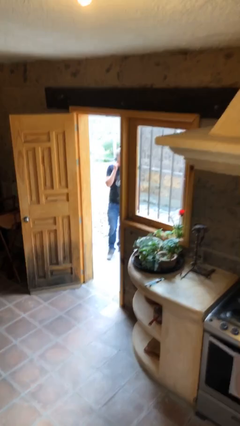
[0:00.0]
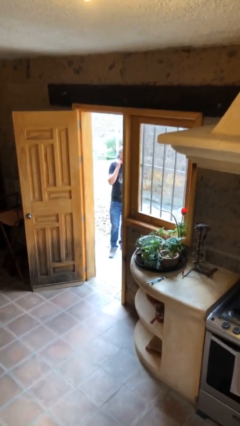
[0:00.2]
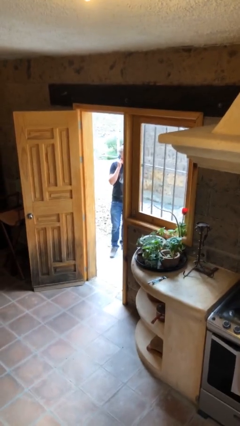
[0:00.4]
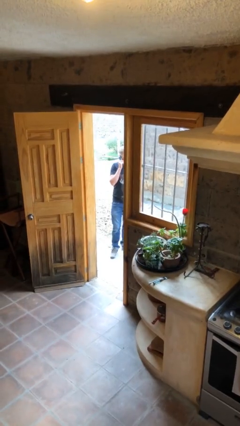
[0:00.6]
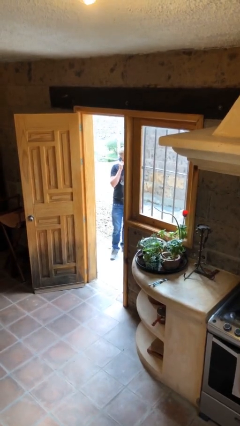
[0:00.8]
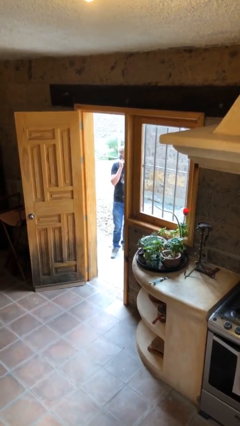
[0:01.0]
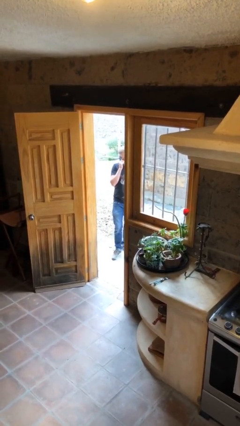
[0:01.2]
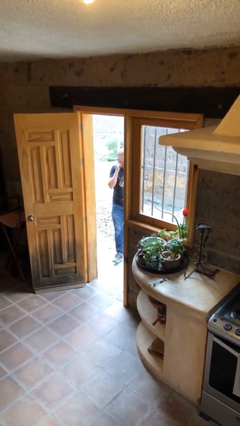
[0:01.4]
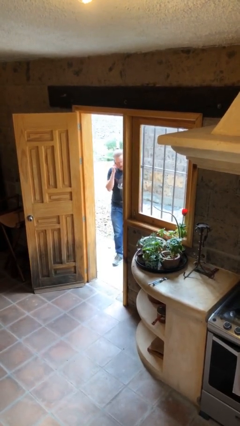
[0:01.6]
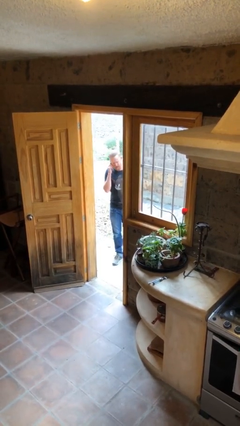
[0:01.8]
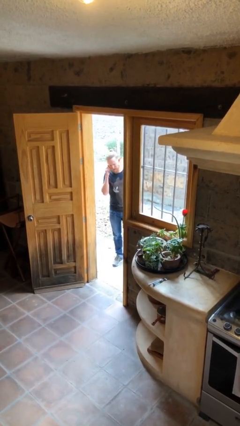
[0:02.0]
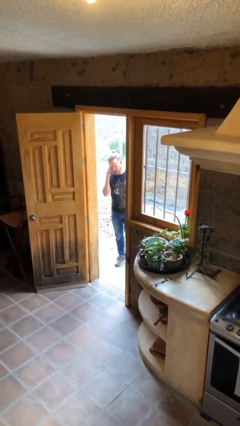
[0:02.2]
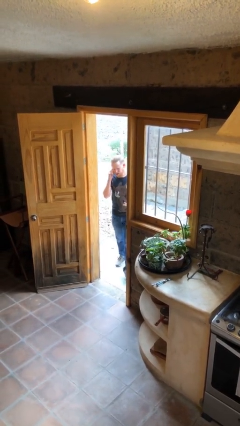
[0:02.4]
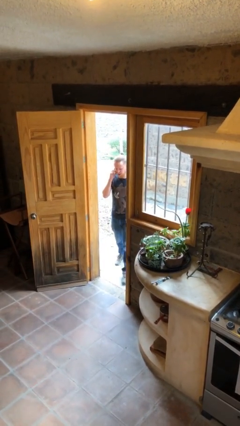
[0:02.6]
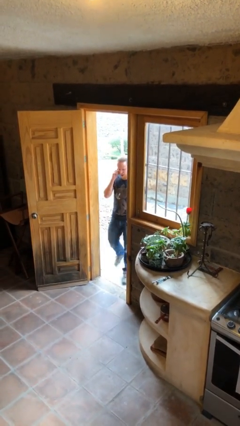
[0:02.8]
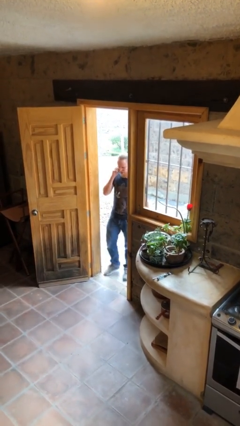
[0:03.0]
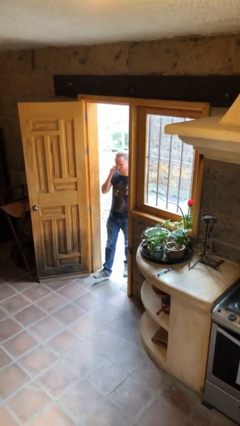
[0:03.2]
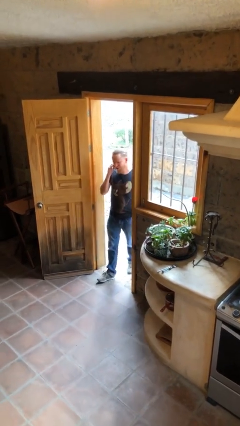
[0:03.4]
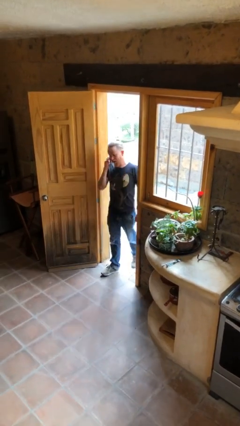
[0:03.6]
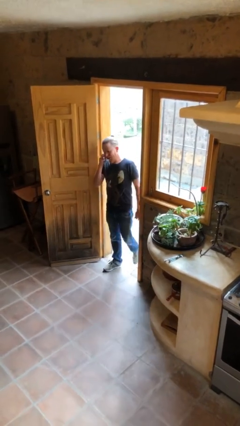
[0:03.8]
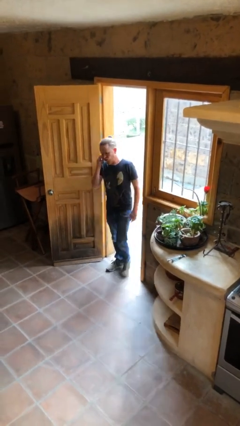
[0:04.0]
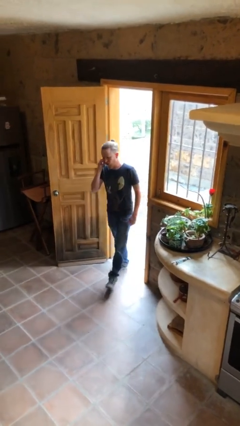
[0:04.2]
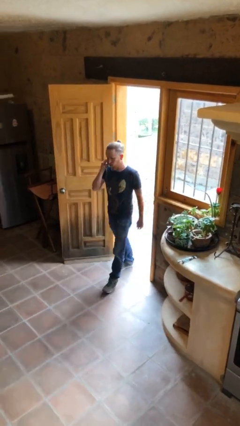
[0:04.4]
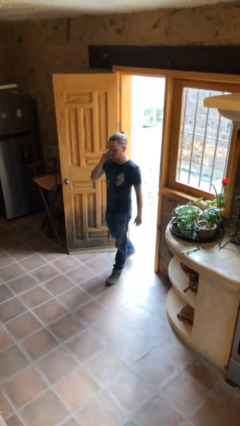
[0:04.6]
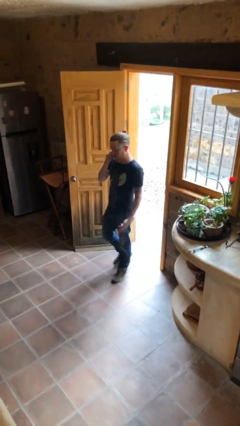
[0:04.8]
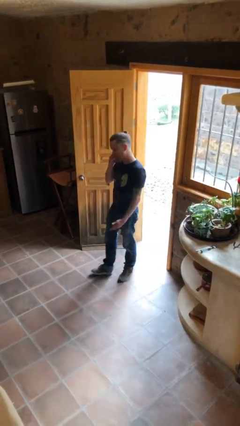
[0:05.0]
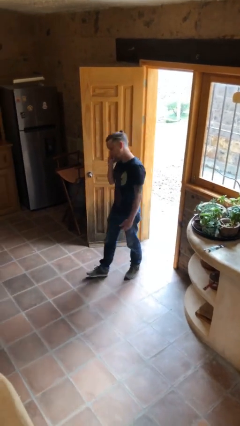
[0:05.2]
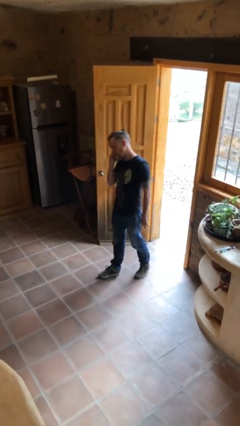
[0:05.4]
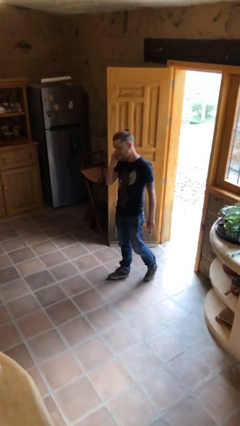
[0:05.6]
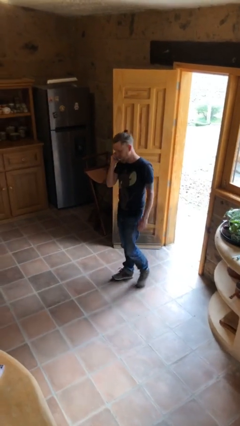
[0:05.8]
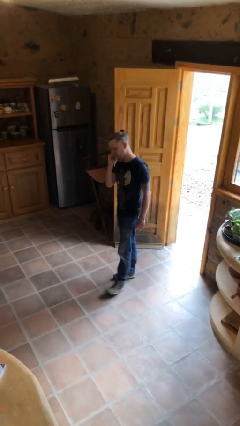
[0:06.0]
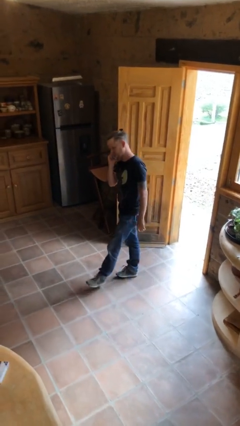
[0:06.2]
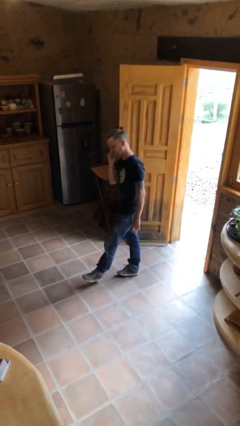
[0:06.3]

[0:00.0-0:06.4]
person enters scene through structure

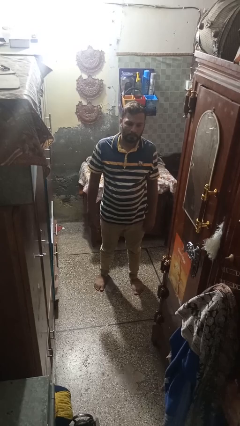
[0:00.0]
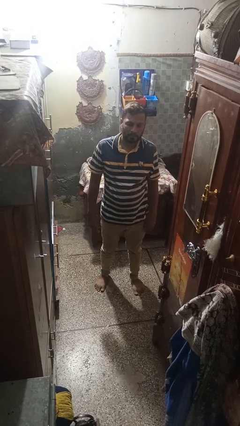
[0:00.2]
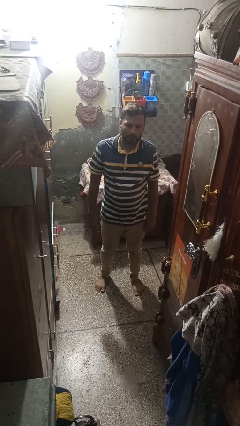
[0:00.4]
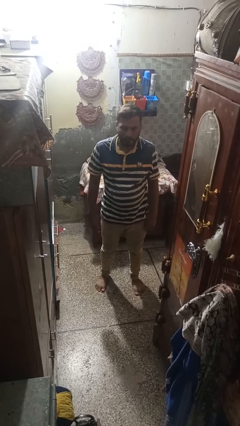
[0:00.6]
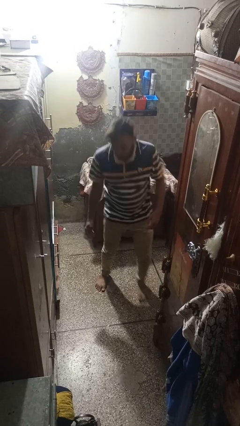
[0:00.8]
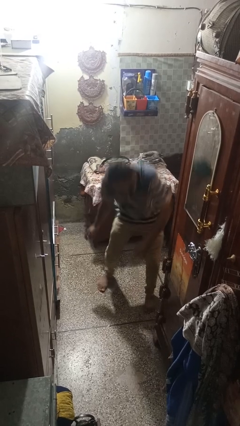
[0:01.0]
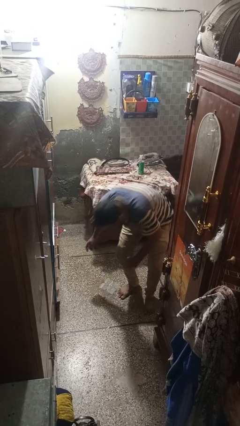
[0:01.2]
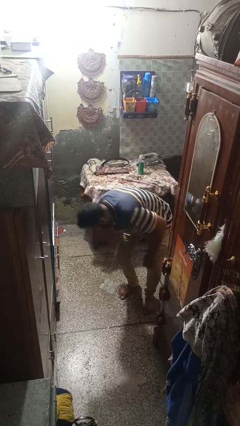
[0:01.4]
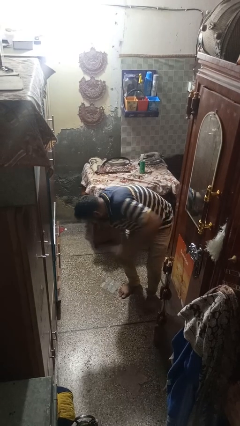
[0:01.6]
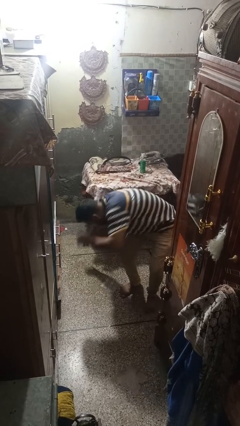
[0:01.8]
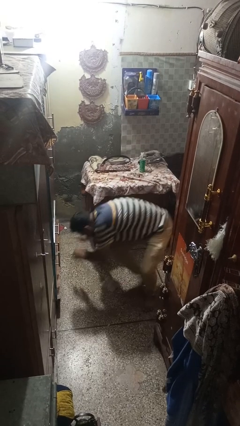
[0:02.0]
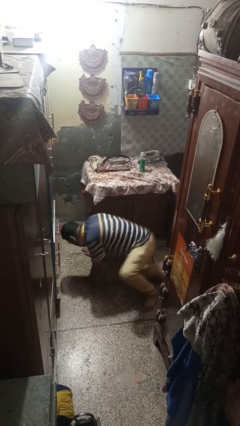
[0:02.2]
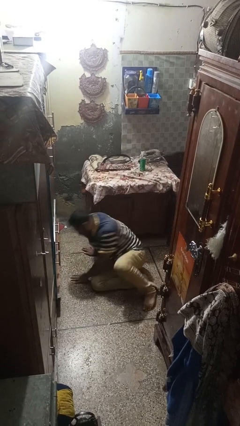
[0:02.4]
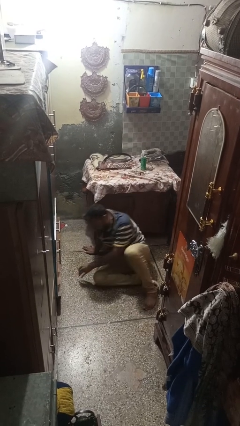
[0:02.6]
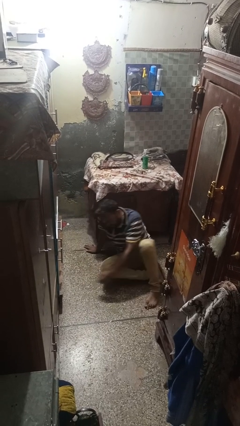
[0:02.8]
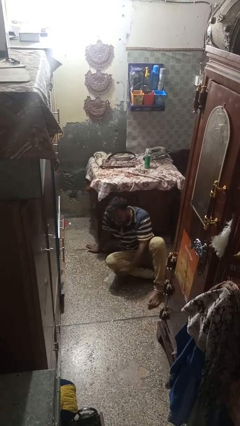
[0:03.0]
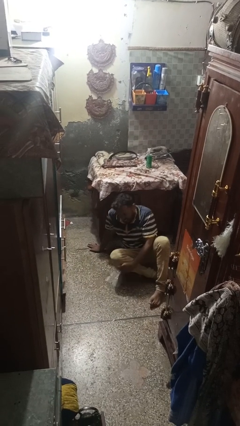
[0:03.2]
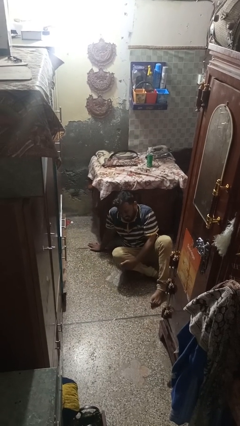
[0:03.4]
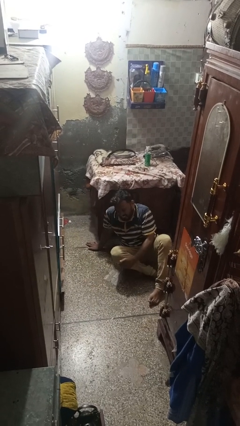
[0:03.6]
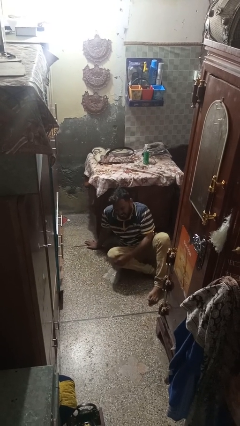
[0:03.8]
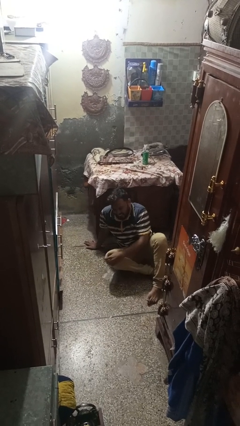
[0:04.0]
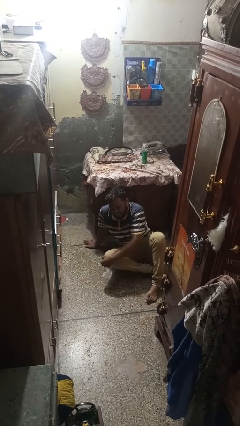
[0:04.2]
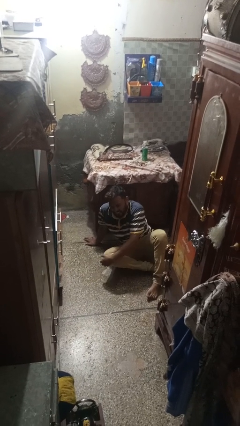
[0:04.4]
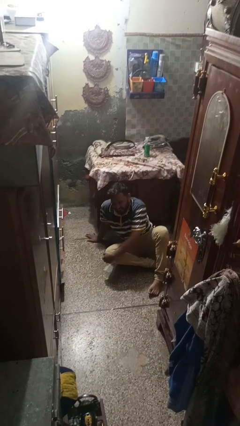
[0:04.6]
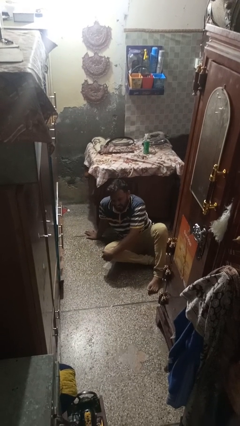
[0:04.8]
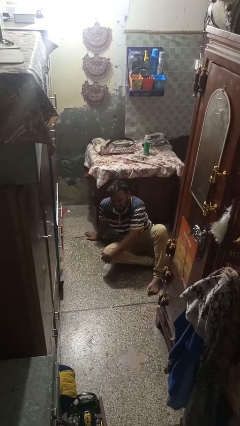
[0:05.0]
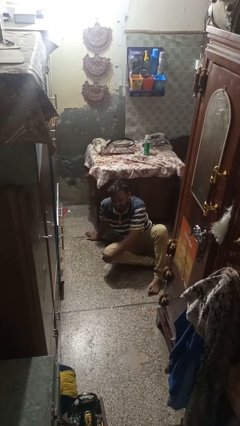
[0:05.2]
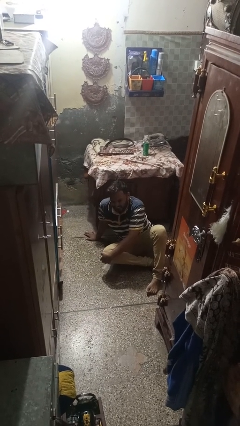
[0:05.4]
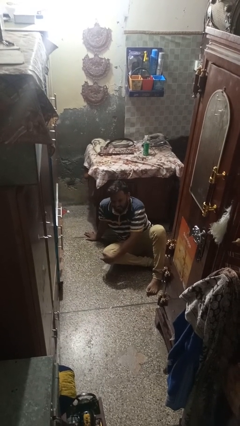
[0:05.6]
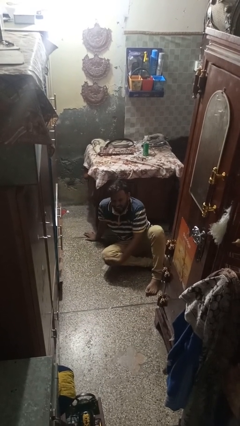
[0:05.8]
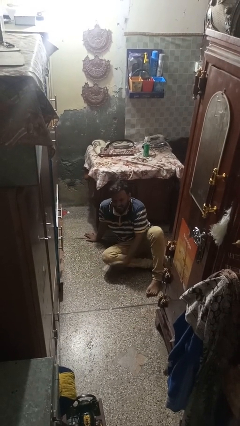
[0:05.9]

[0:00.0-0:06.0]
person falls while standing

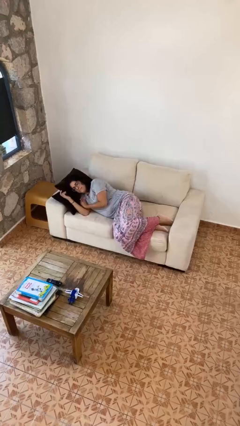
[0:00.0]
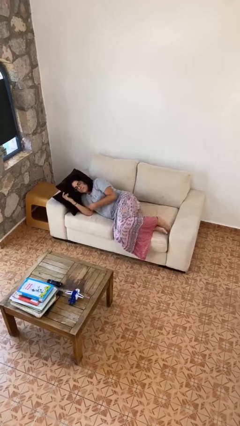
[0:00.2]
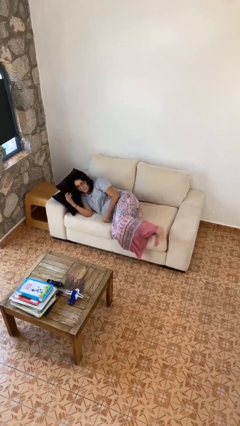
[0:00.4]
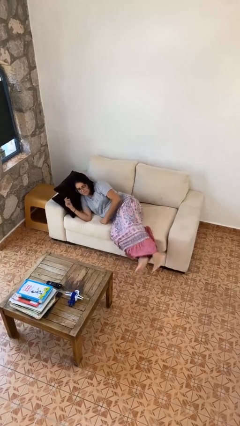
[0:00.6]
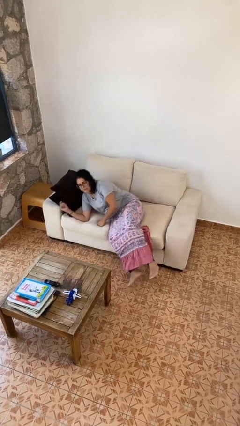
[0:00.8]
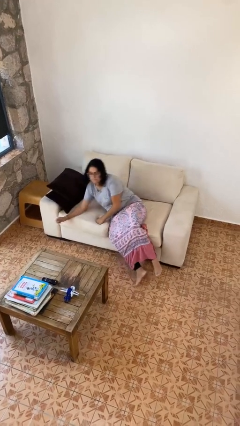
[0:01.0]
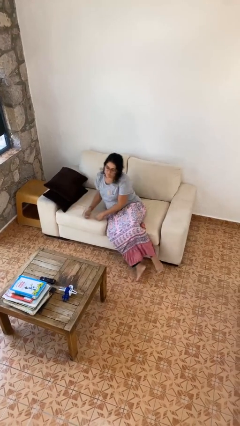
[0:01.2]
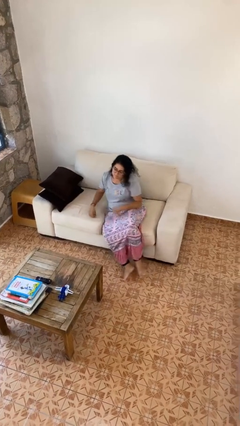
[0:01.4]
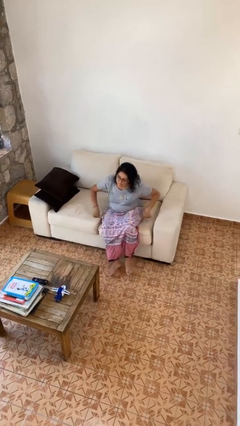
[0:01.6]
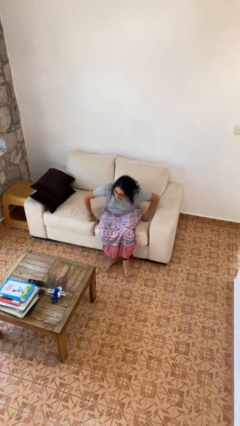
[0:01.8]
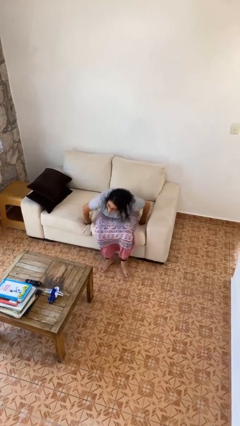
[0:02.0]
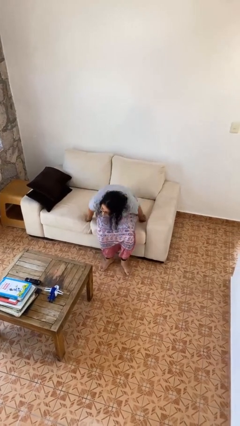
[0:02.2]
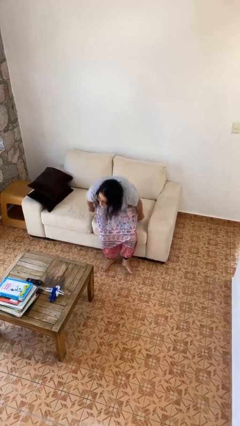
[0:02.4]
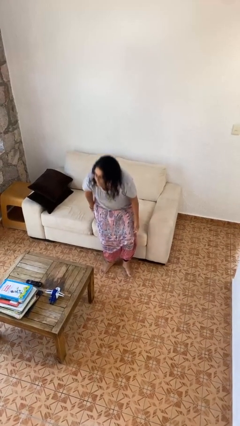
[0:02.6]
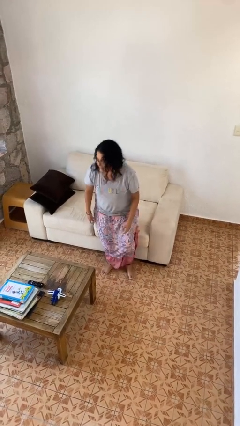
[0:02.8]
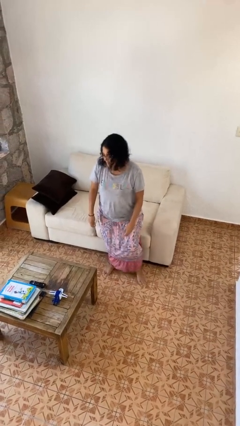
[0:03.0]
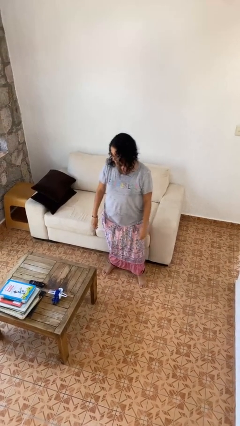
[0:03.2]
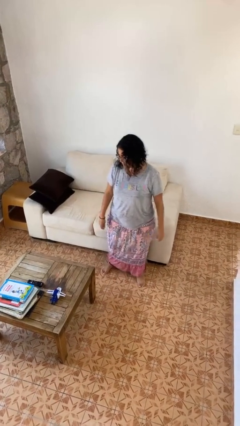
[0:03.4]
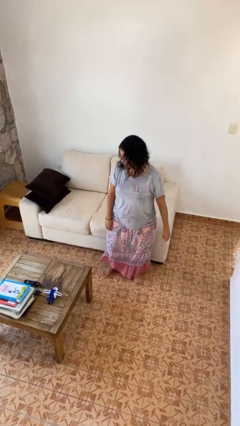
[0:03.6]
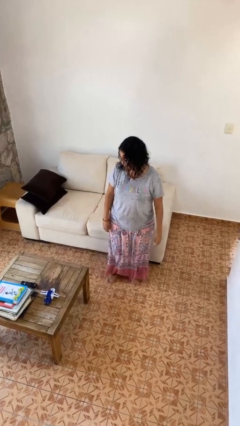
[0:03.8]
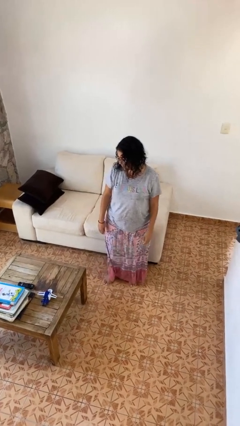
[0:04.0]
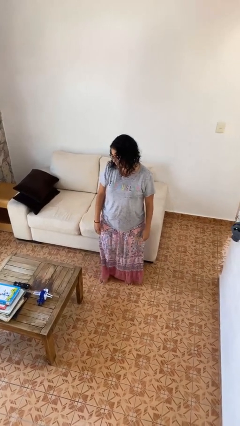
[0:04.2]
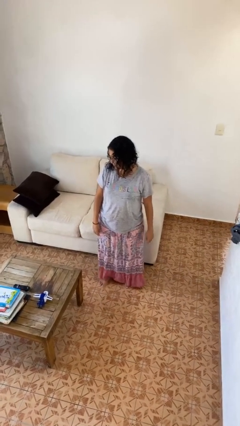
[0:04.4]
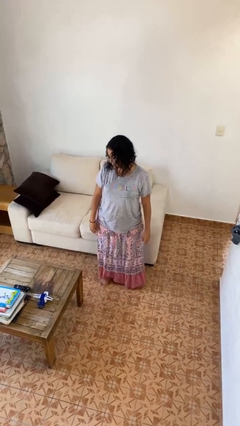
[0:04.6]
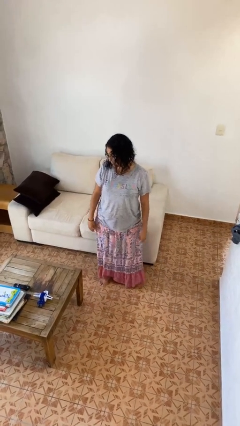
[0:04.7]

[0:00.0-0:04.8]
person stands up

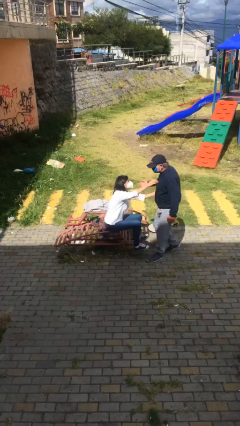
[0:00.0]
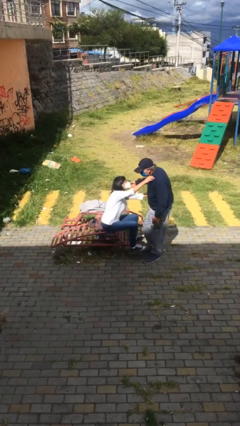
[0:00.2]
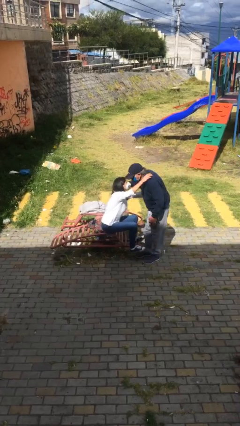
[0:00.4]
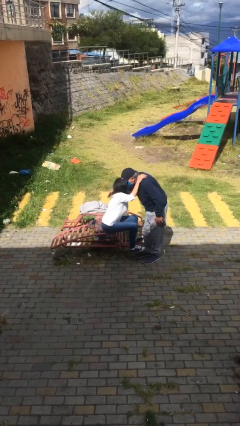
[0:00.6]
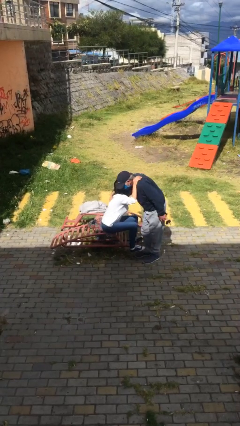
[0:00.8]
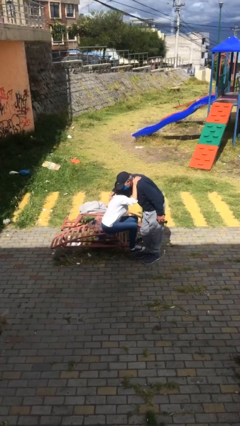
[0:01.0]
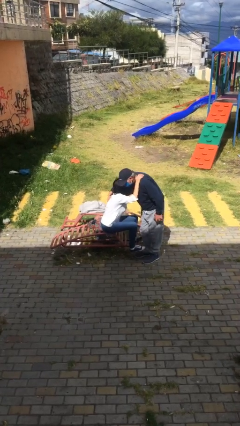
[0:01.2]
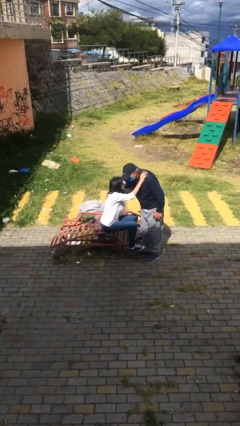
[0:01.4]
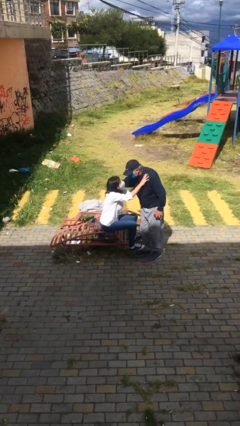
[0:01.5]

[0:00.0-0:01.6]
person embraces person
